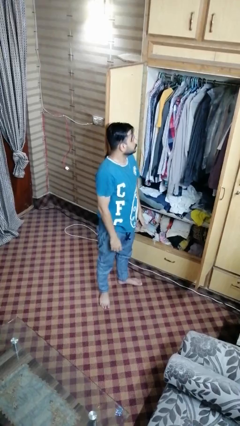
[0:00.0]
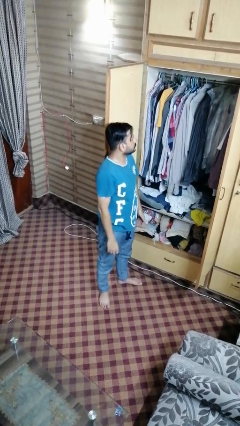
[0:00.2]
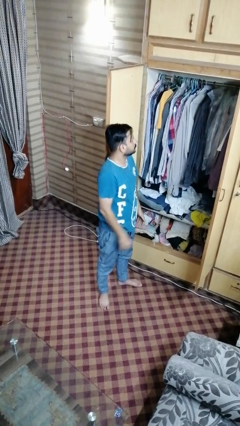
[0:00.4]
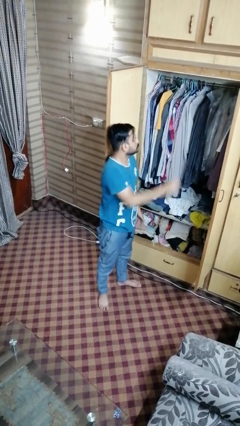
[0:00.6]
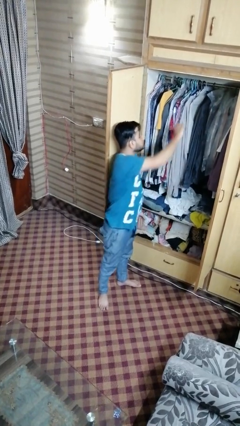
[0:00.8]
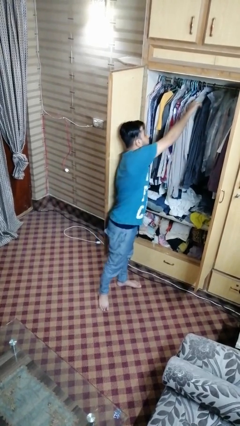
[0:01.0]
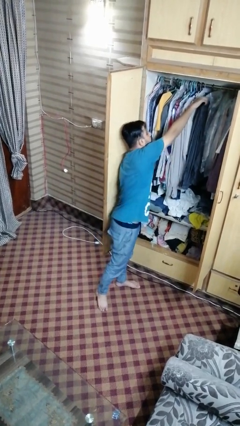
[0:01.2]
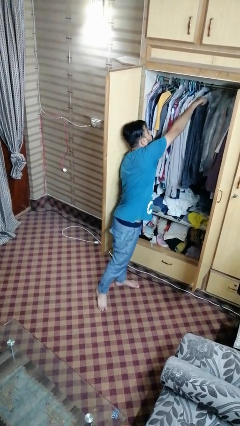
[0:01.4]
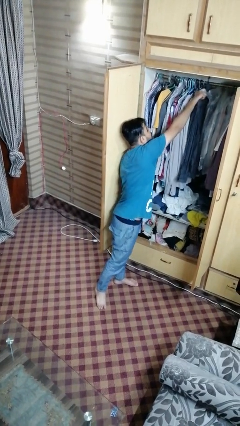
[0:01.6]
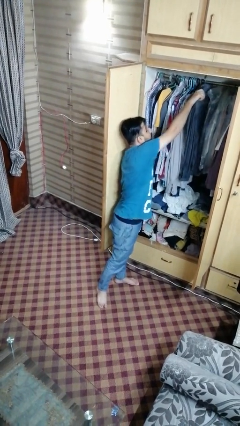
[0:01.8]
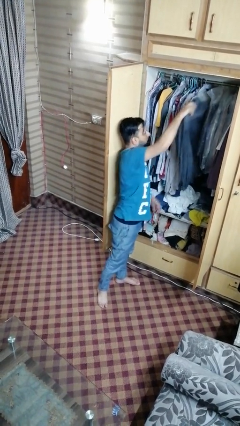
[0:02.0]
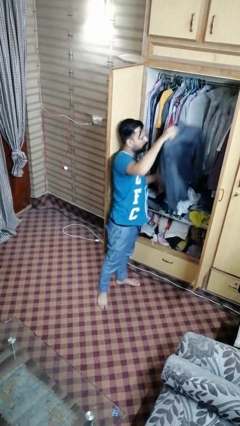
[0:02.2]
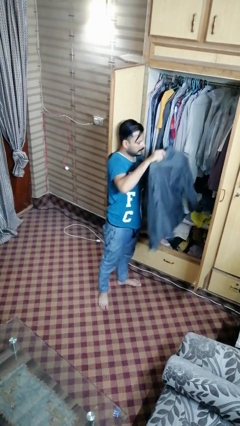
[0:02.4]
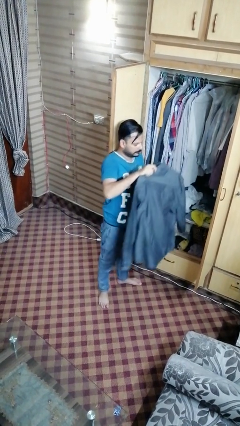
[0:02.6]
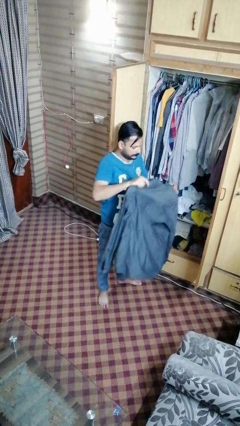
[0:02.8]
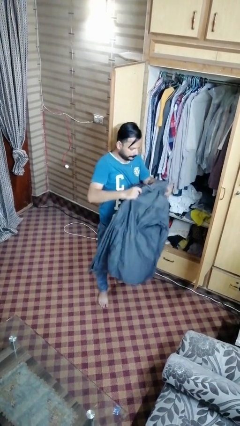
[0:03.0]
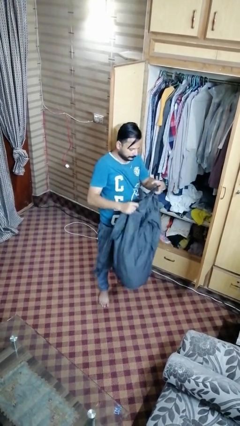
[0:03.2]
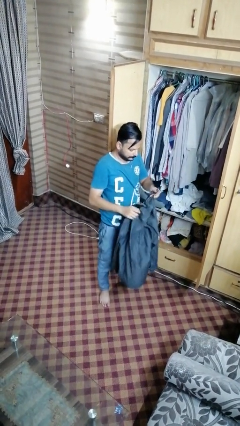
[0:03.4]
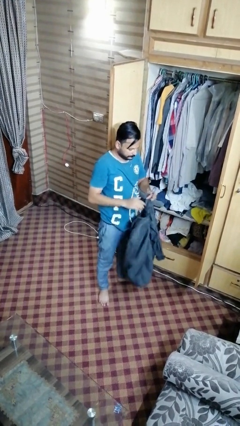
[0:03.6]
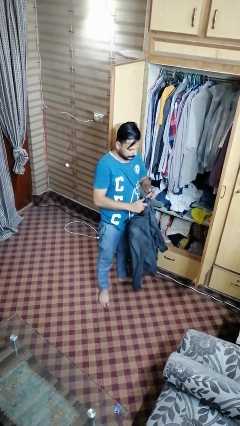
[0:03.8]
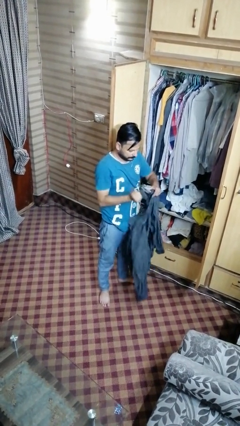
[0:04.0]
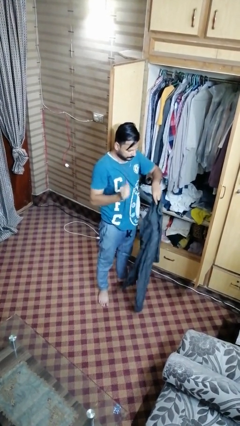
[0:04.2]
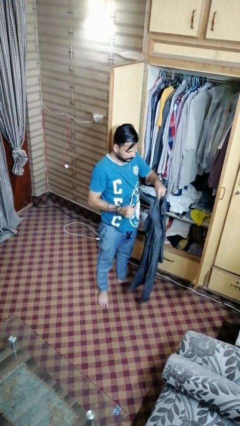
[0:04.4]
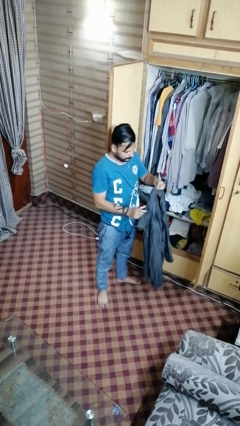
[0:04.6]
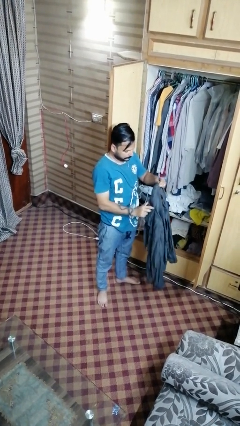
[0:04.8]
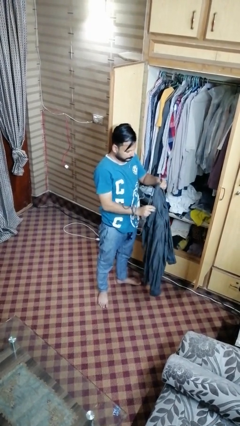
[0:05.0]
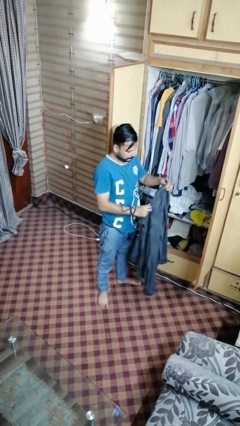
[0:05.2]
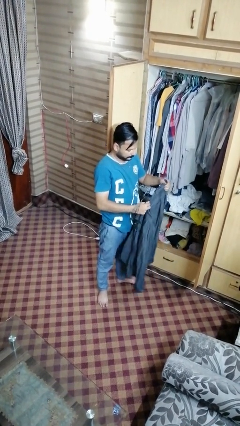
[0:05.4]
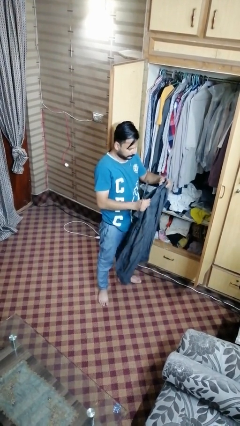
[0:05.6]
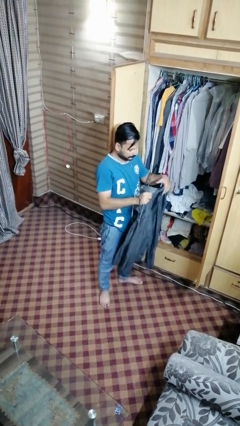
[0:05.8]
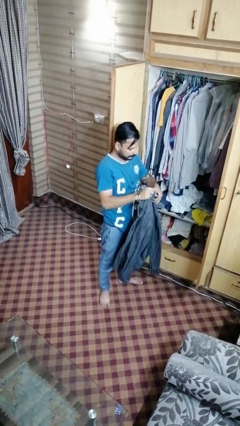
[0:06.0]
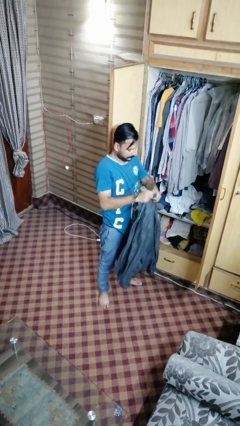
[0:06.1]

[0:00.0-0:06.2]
person takes clothes from dresser

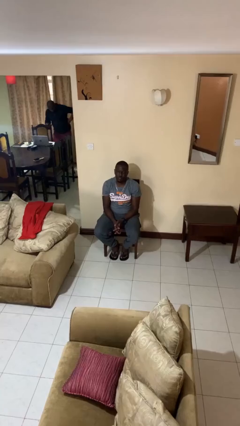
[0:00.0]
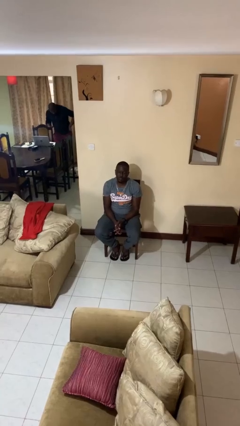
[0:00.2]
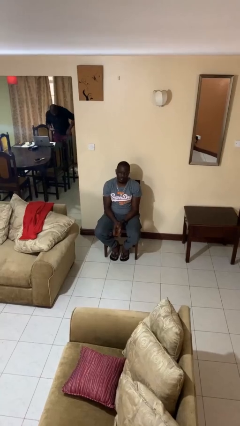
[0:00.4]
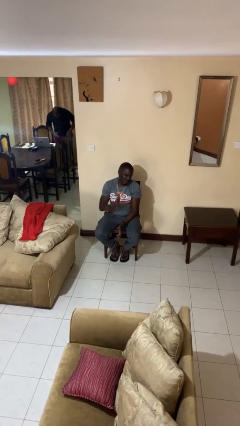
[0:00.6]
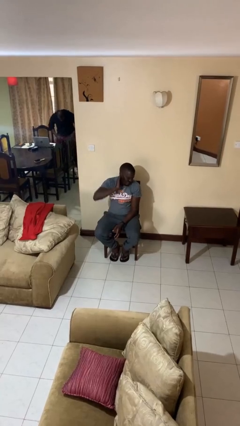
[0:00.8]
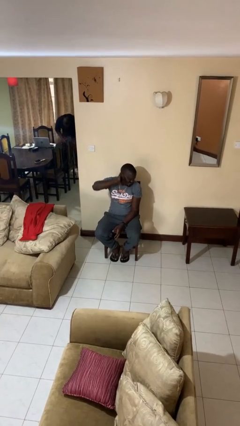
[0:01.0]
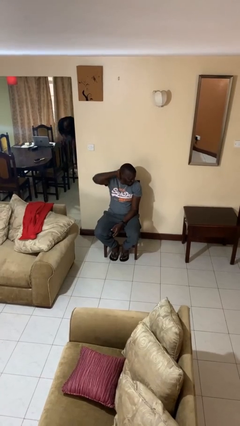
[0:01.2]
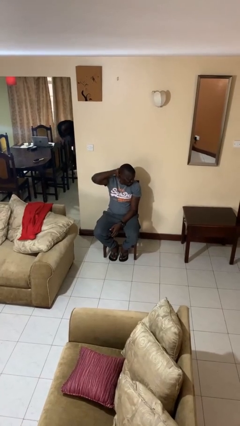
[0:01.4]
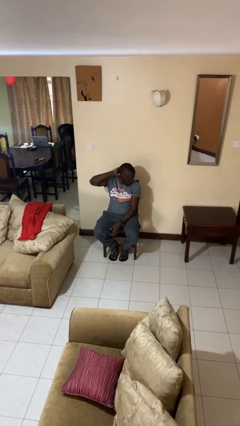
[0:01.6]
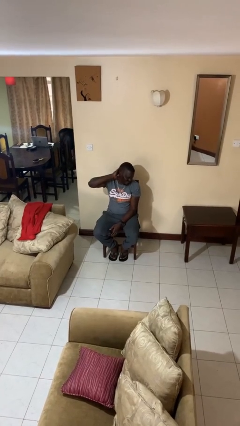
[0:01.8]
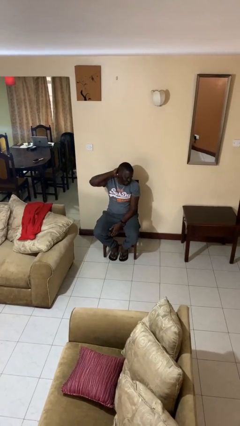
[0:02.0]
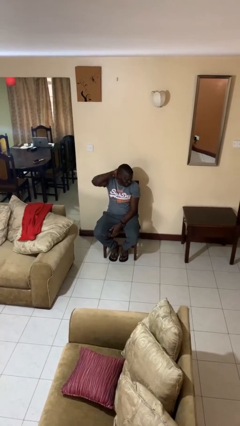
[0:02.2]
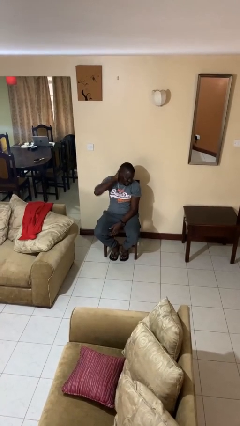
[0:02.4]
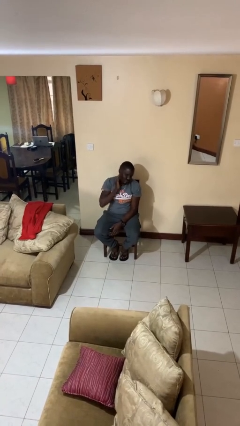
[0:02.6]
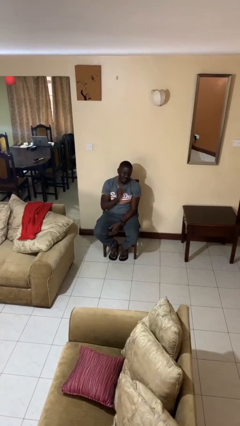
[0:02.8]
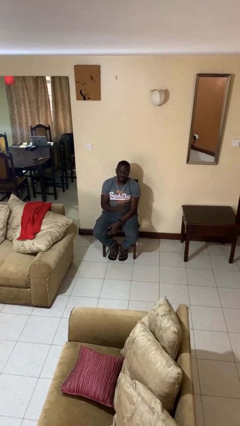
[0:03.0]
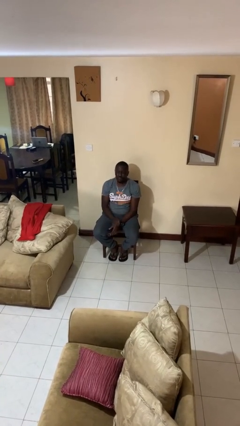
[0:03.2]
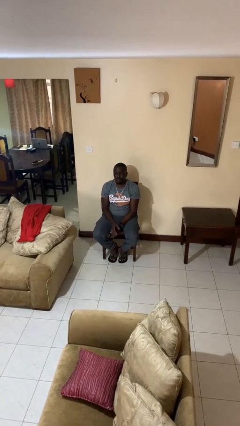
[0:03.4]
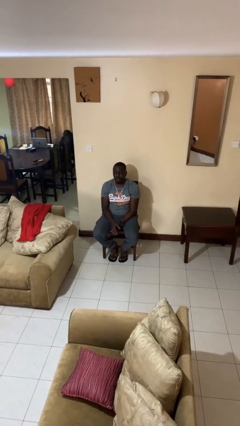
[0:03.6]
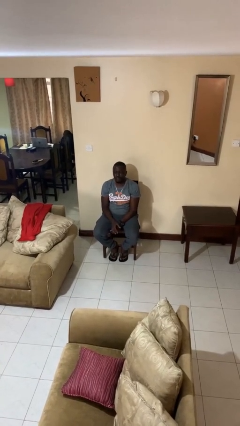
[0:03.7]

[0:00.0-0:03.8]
person rubs neck

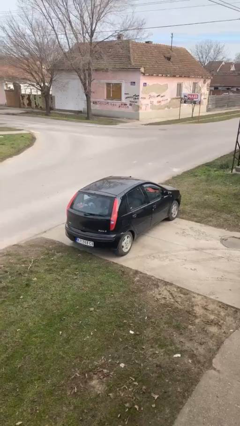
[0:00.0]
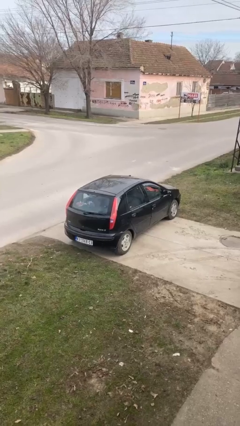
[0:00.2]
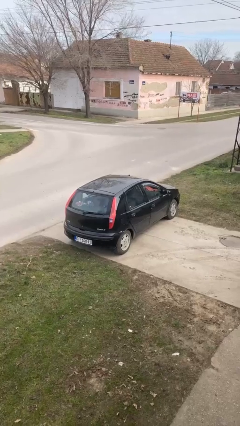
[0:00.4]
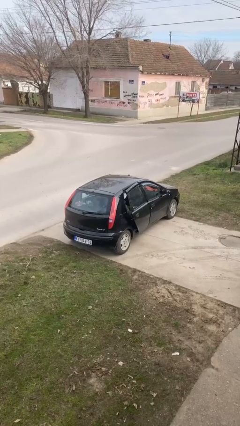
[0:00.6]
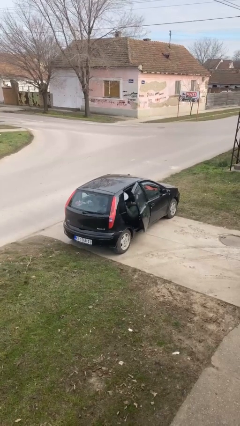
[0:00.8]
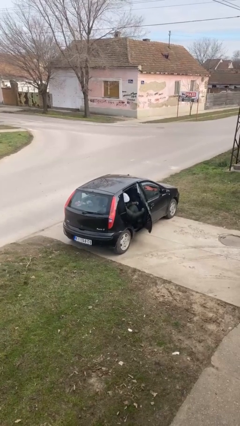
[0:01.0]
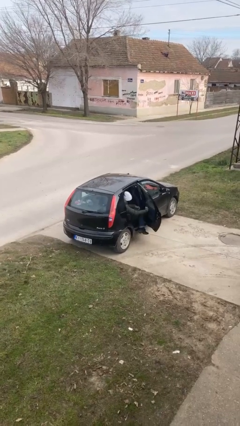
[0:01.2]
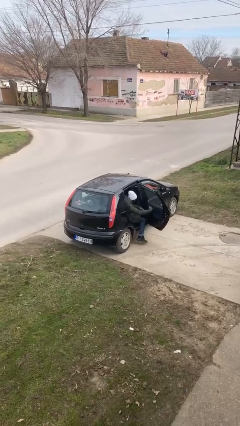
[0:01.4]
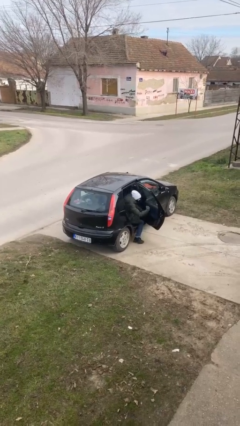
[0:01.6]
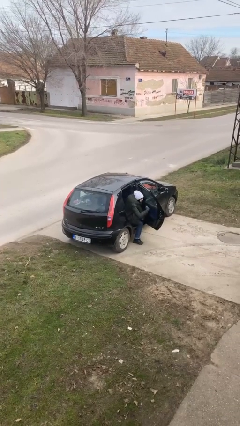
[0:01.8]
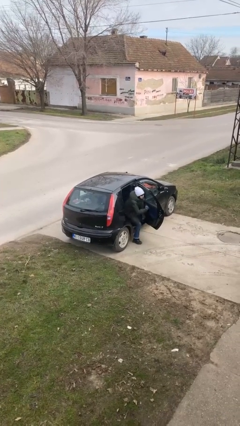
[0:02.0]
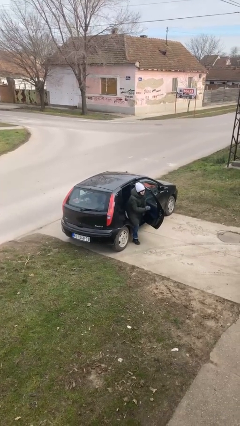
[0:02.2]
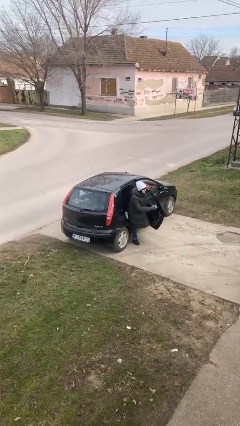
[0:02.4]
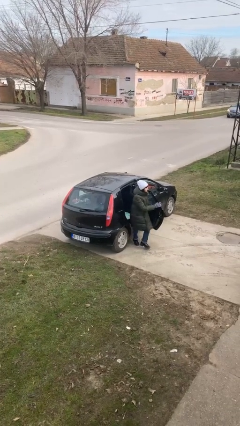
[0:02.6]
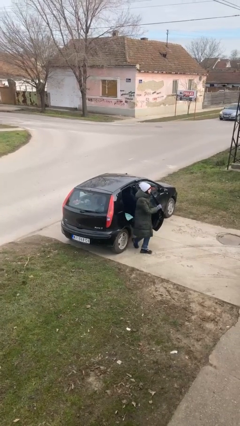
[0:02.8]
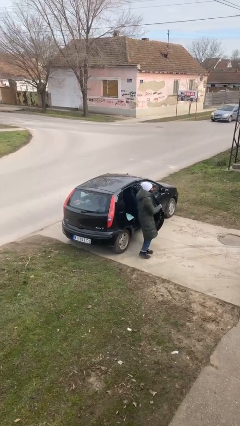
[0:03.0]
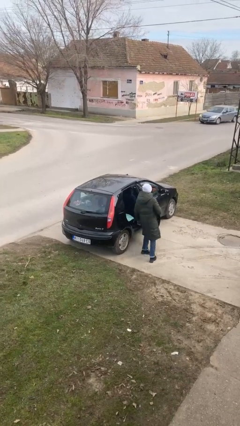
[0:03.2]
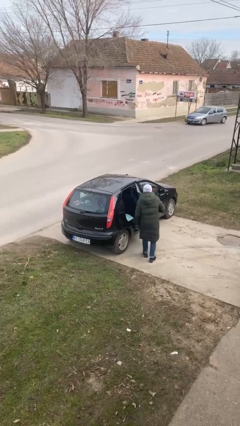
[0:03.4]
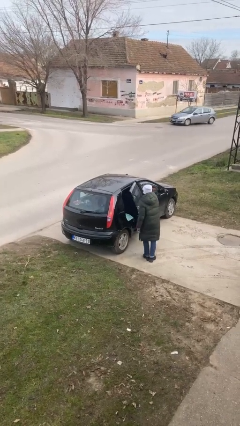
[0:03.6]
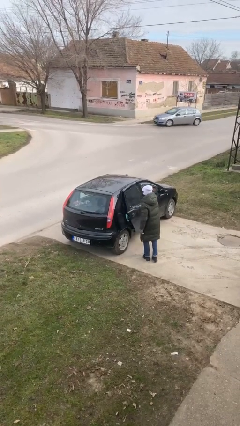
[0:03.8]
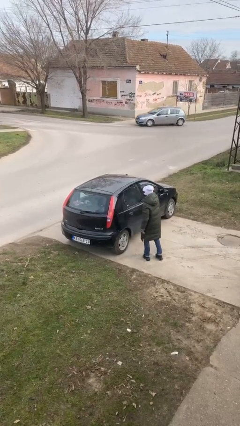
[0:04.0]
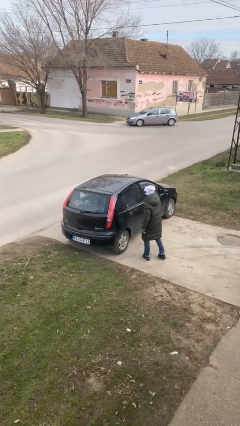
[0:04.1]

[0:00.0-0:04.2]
car drops off person

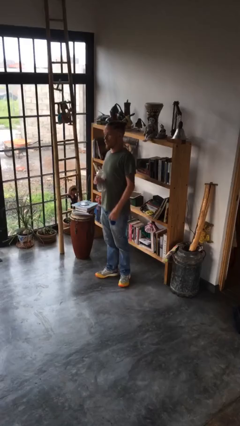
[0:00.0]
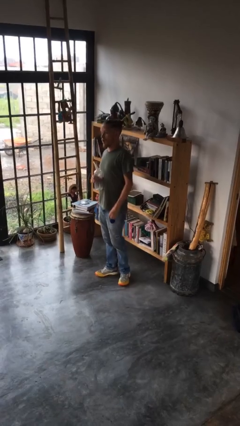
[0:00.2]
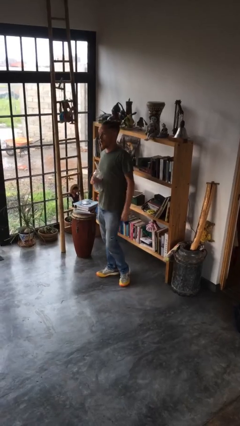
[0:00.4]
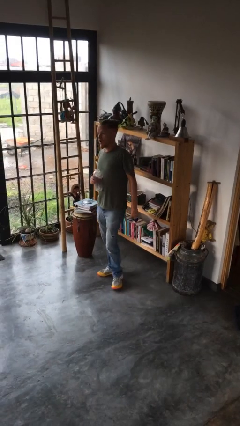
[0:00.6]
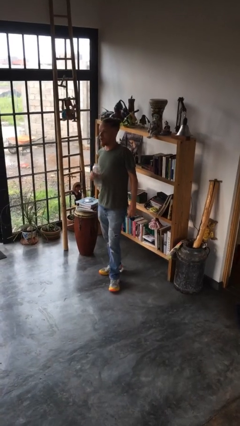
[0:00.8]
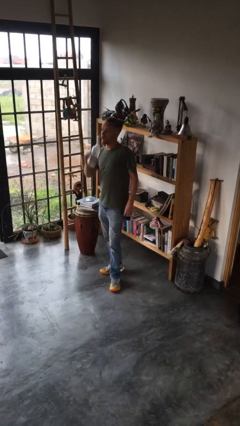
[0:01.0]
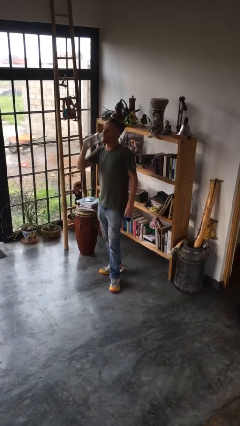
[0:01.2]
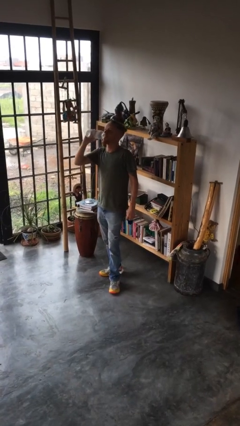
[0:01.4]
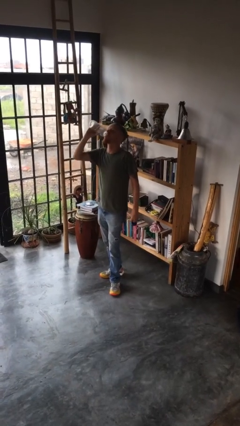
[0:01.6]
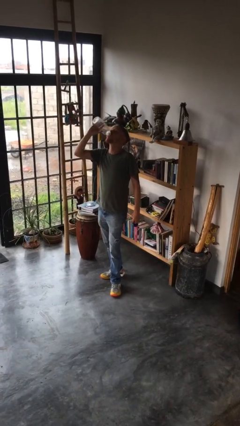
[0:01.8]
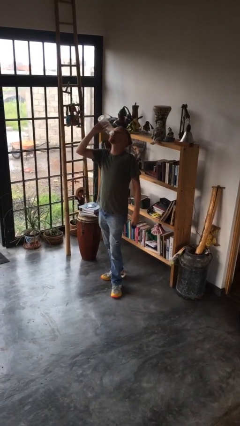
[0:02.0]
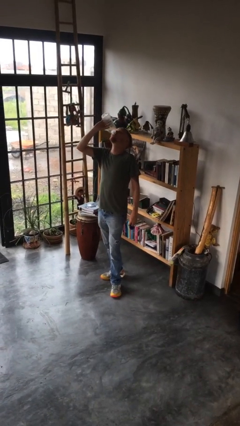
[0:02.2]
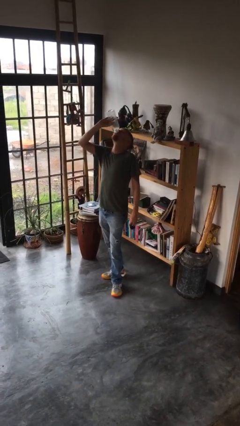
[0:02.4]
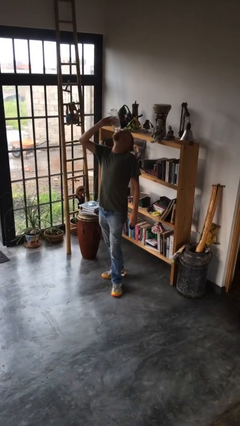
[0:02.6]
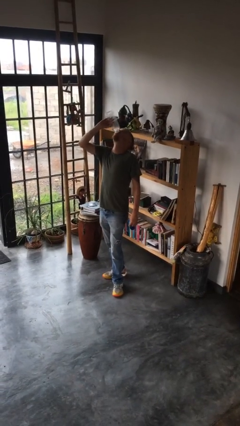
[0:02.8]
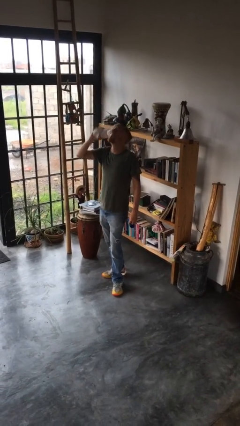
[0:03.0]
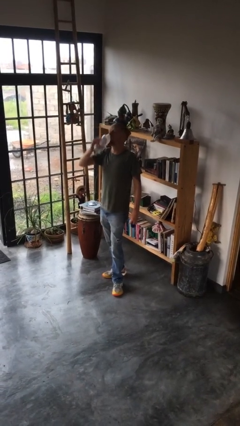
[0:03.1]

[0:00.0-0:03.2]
person drinks from bottle

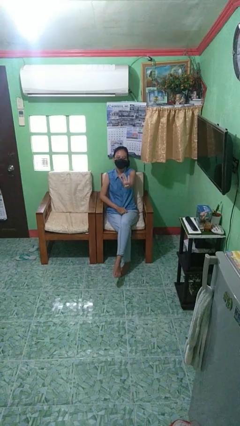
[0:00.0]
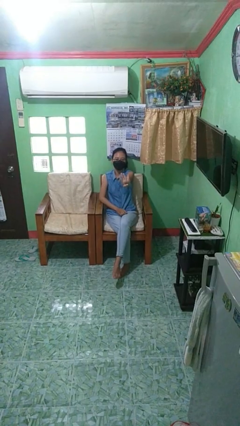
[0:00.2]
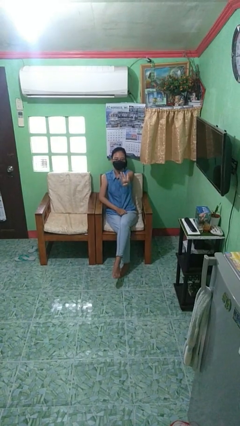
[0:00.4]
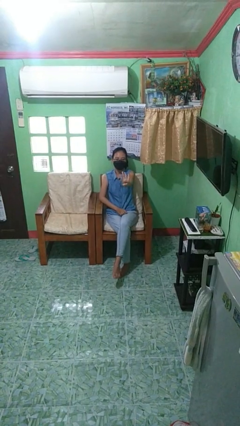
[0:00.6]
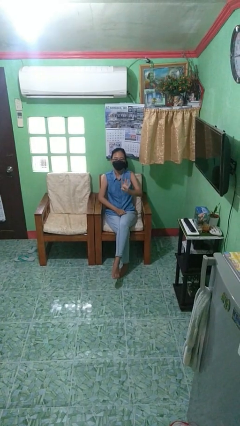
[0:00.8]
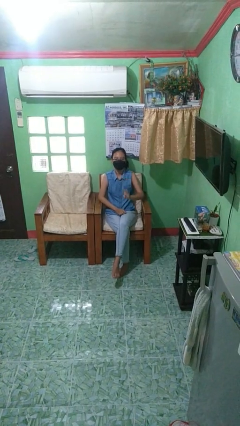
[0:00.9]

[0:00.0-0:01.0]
person gestures number four
